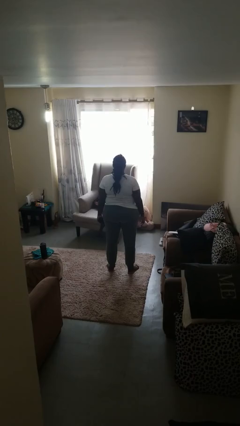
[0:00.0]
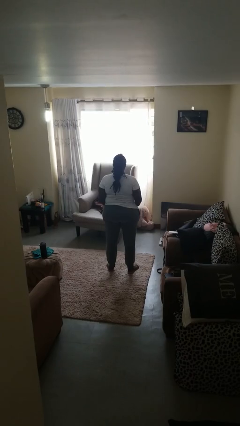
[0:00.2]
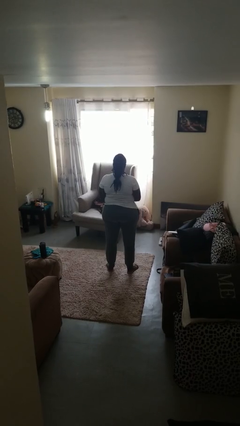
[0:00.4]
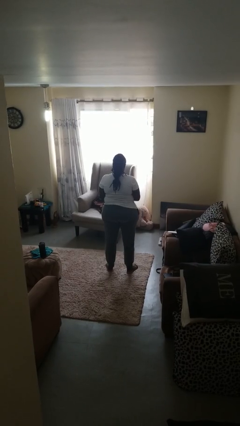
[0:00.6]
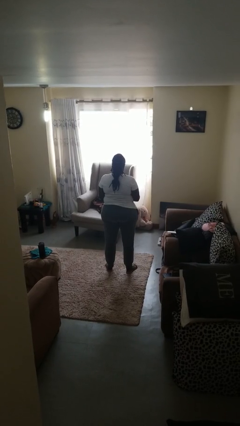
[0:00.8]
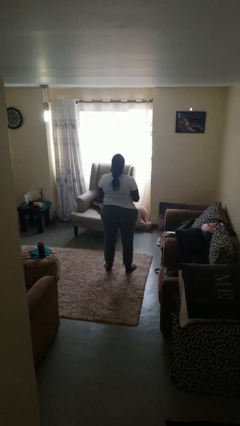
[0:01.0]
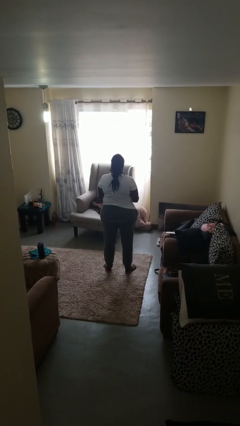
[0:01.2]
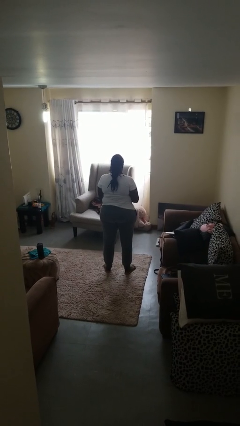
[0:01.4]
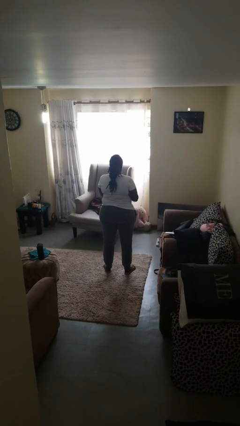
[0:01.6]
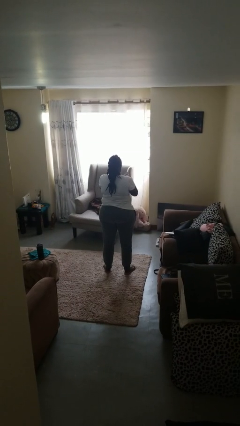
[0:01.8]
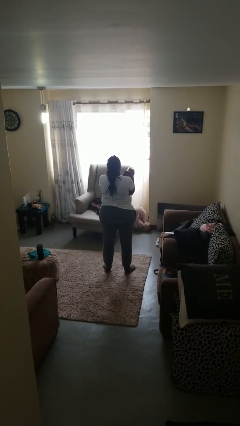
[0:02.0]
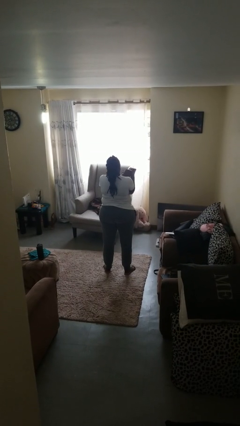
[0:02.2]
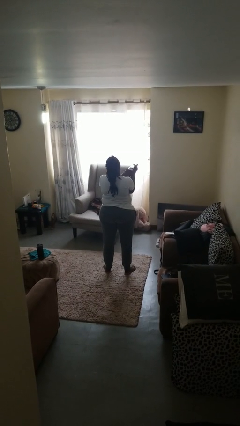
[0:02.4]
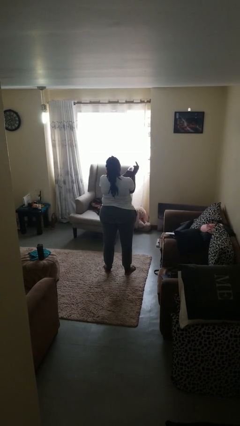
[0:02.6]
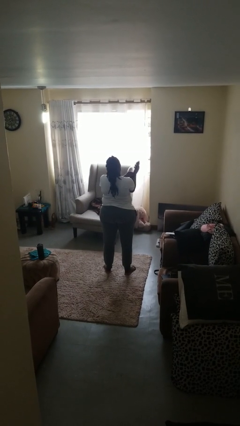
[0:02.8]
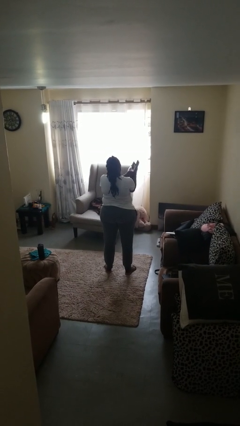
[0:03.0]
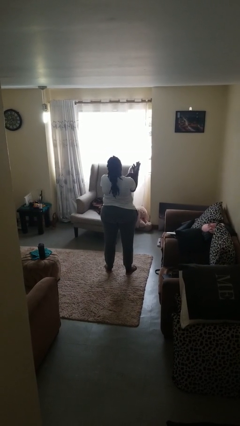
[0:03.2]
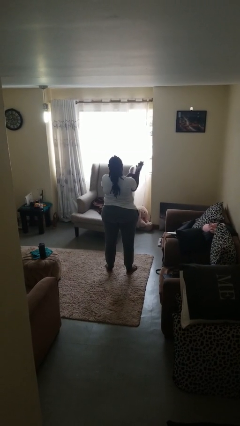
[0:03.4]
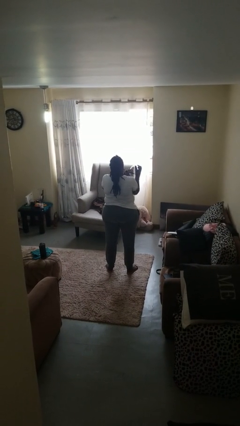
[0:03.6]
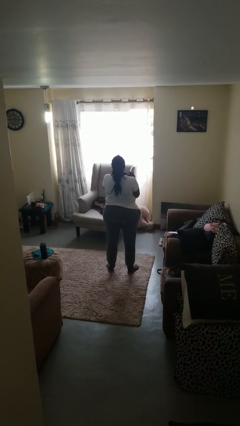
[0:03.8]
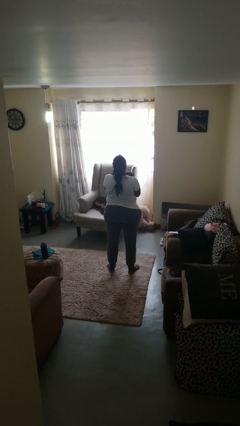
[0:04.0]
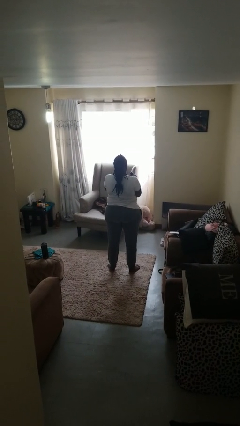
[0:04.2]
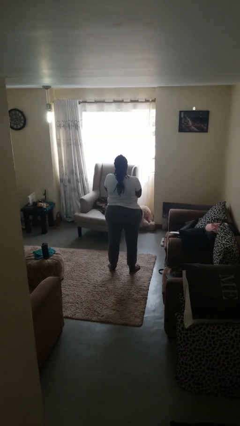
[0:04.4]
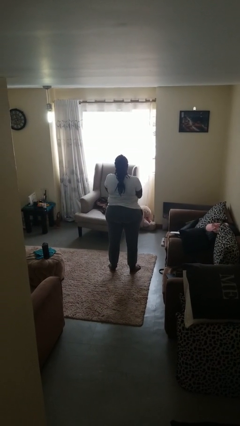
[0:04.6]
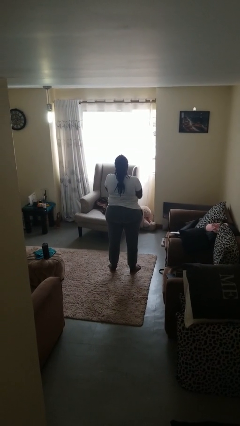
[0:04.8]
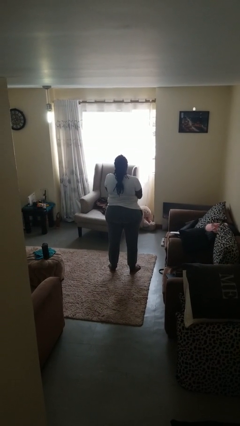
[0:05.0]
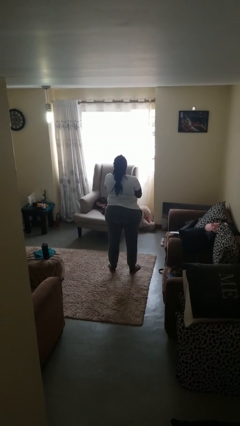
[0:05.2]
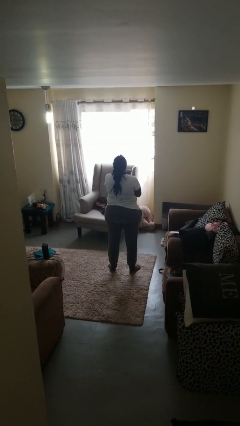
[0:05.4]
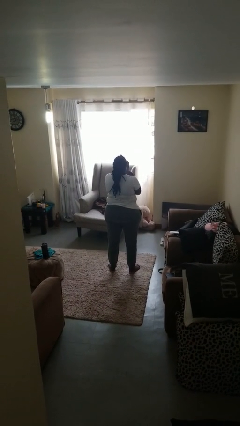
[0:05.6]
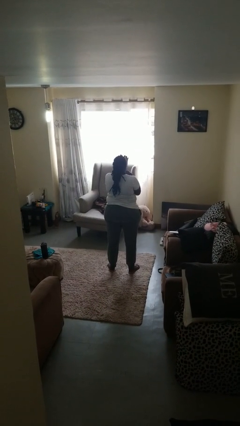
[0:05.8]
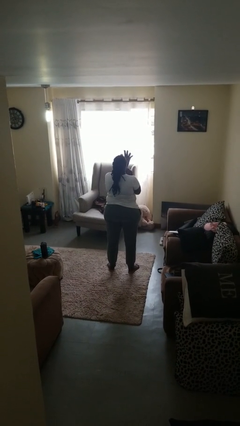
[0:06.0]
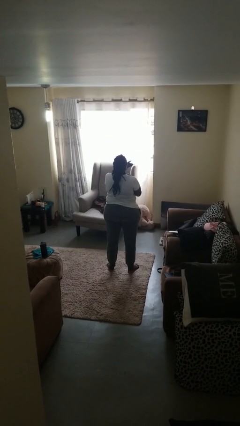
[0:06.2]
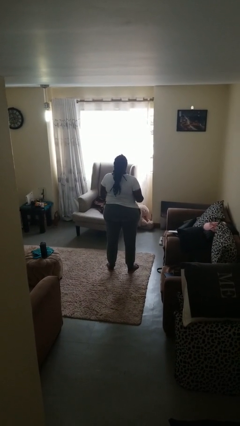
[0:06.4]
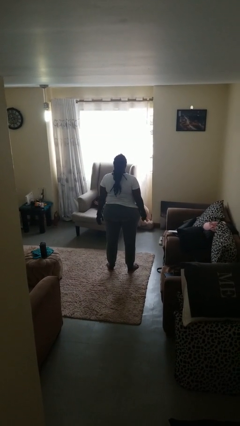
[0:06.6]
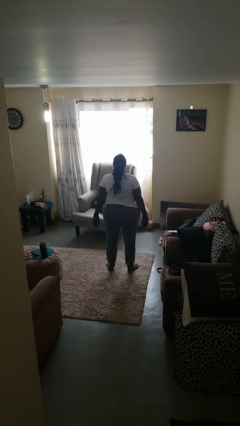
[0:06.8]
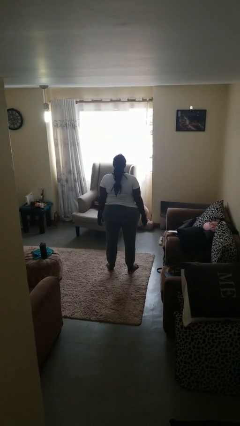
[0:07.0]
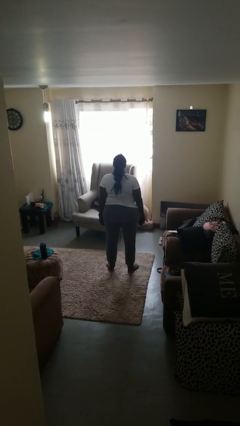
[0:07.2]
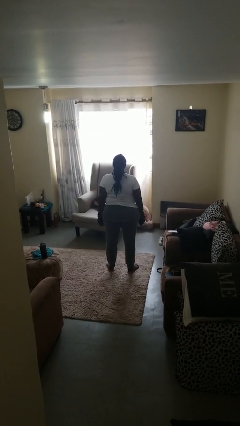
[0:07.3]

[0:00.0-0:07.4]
person puts on gloves

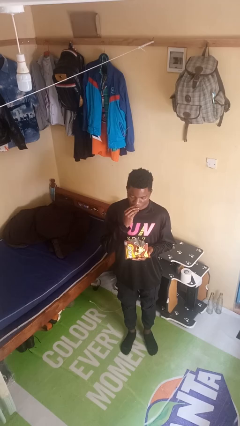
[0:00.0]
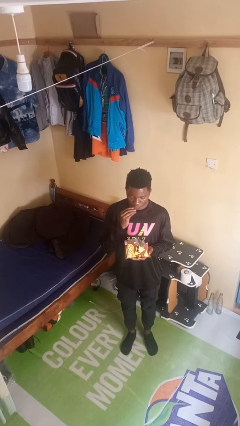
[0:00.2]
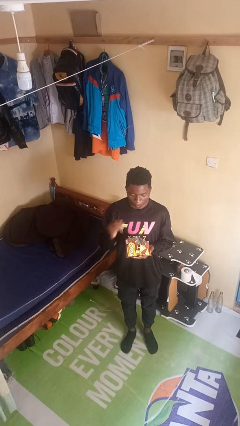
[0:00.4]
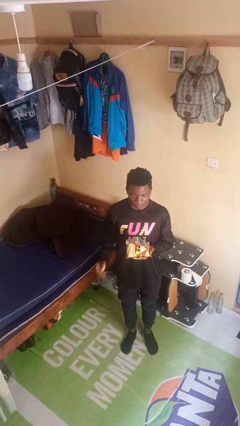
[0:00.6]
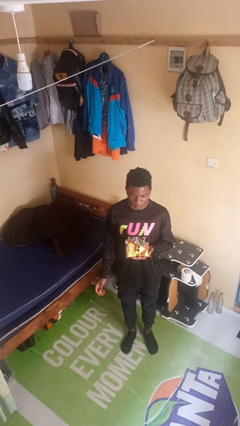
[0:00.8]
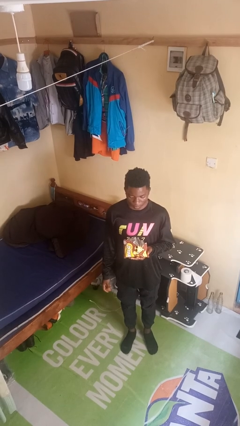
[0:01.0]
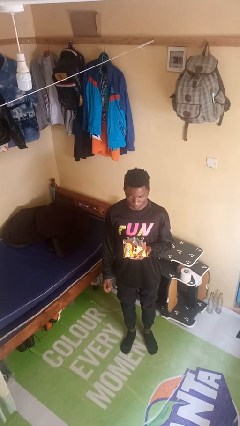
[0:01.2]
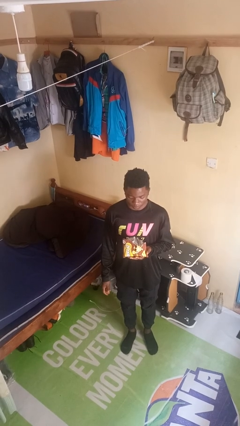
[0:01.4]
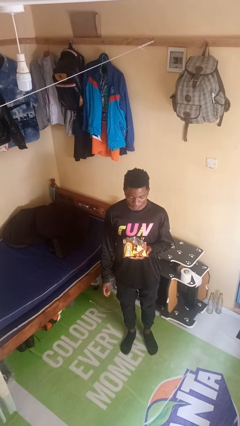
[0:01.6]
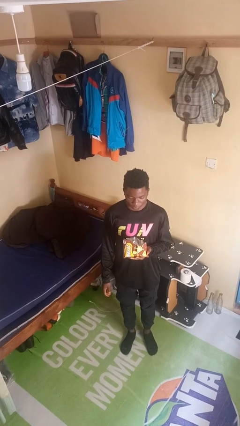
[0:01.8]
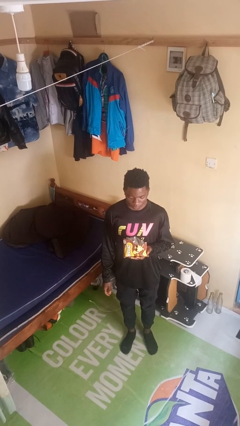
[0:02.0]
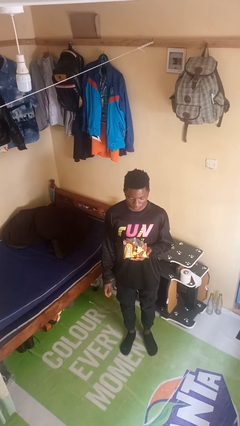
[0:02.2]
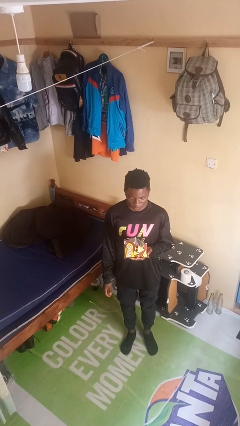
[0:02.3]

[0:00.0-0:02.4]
person eats snack from bag

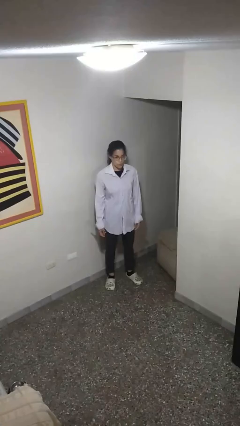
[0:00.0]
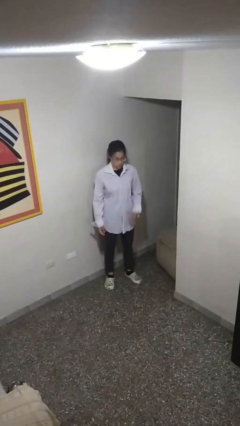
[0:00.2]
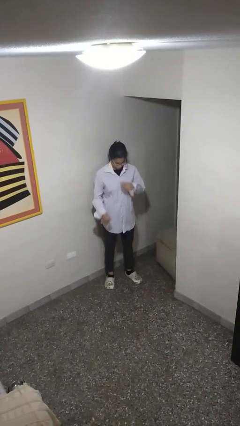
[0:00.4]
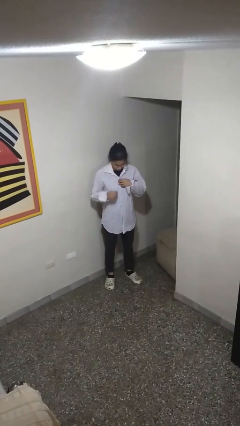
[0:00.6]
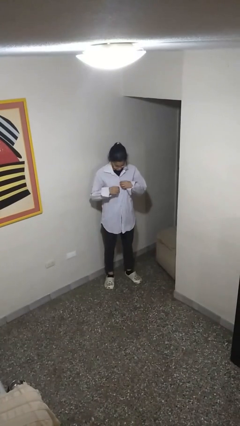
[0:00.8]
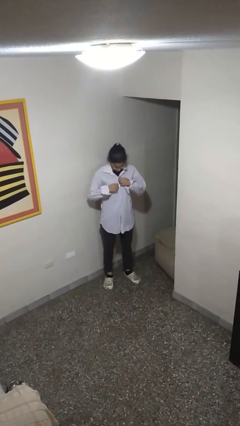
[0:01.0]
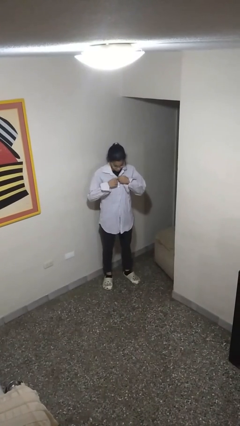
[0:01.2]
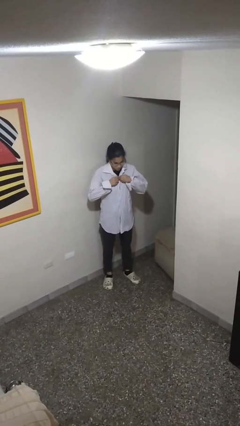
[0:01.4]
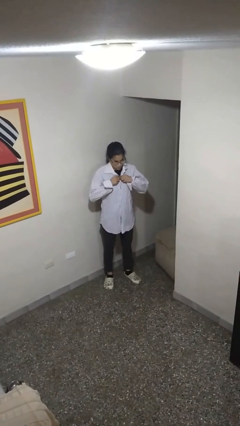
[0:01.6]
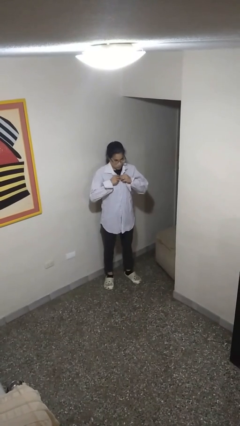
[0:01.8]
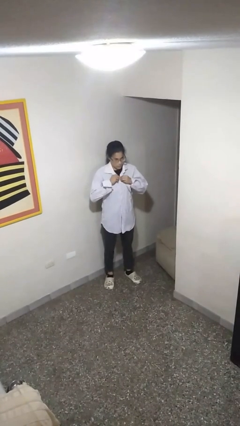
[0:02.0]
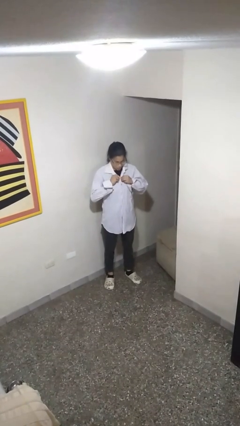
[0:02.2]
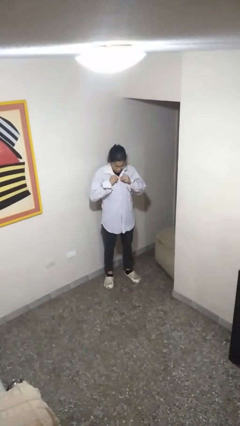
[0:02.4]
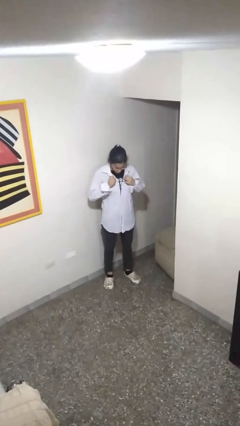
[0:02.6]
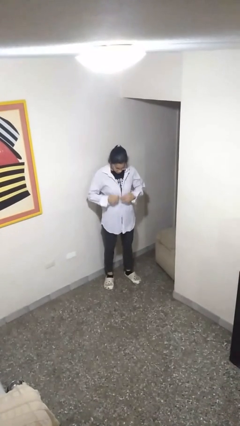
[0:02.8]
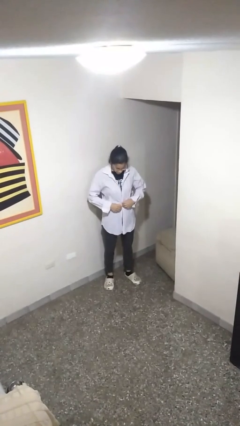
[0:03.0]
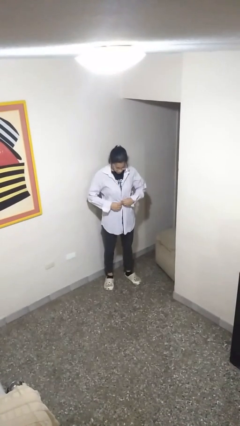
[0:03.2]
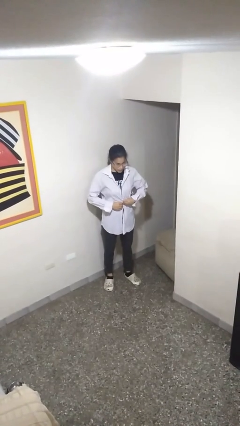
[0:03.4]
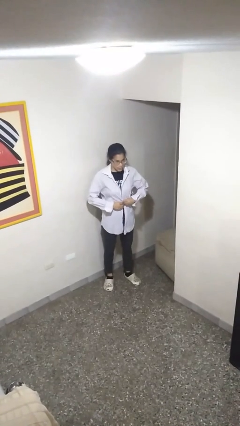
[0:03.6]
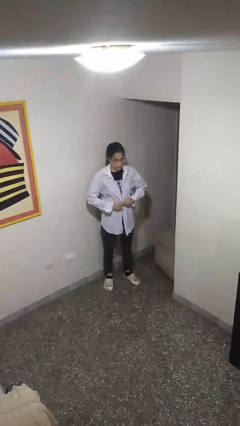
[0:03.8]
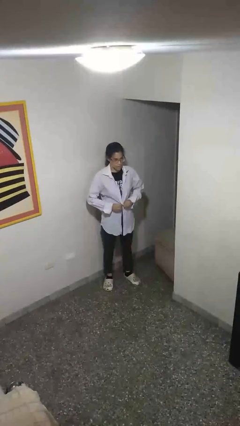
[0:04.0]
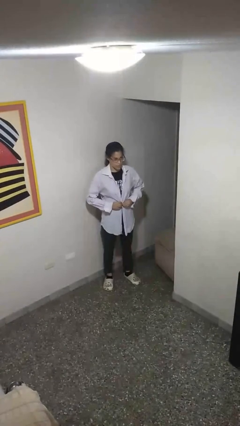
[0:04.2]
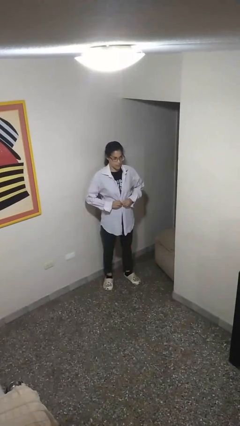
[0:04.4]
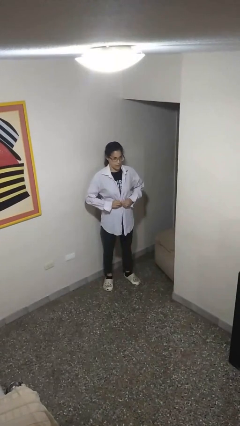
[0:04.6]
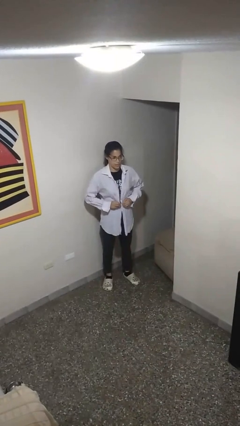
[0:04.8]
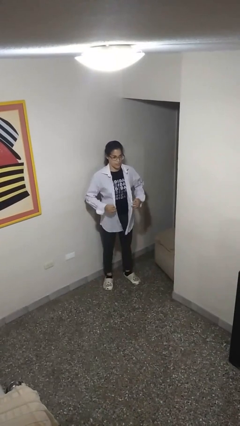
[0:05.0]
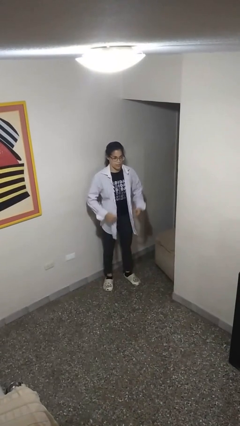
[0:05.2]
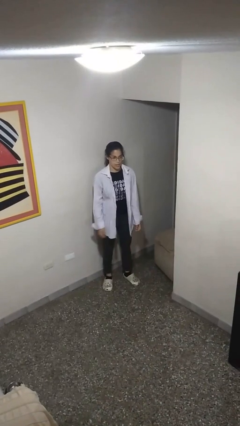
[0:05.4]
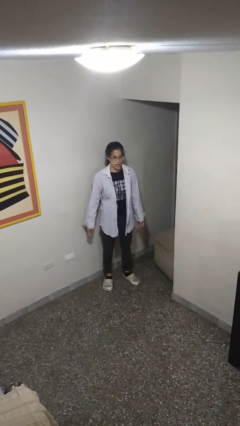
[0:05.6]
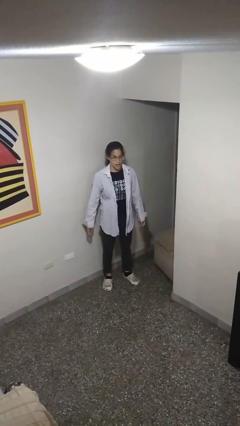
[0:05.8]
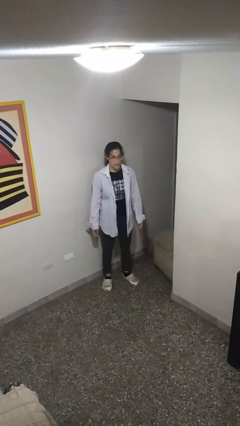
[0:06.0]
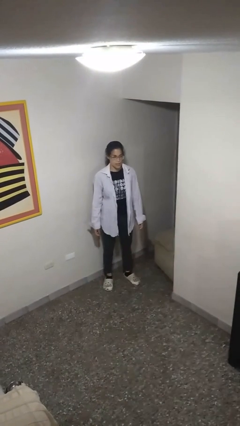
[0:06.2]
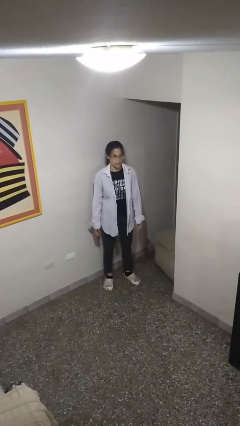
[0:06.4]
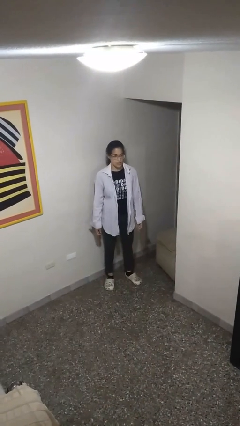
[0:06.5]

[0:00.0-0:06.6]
person unbuttons shirt

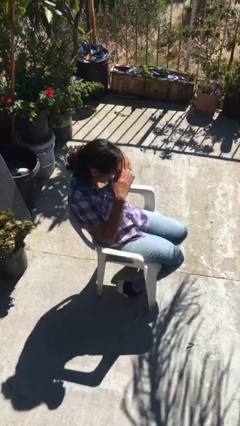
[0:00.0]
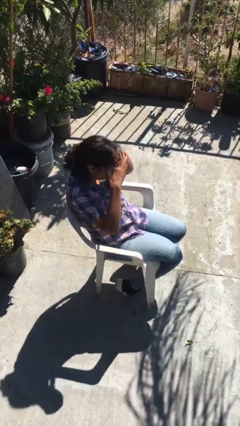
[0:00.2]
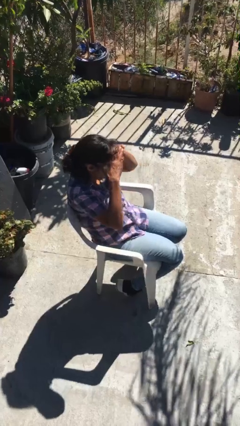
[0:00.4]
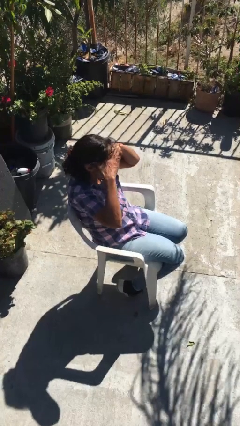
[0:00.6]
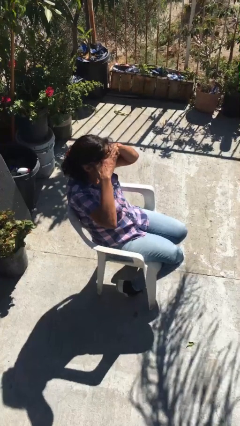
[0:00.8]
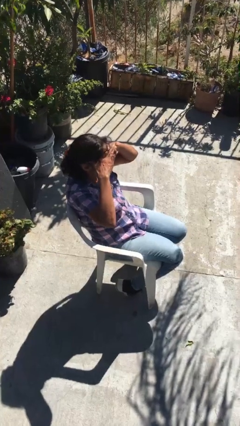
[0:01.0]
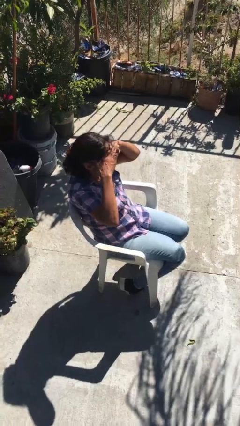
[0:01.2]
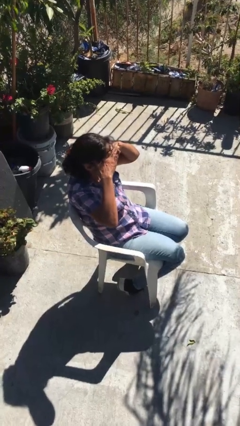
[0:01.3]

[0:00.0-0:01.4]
person shades eyes

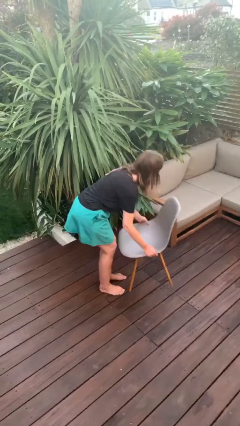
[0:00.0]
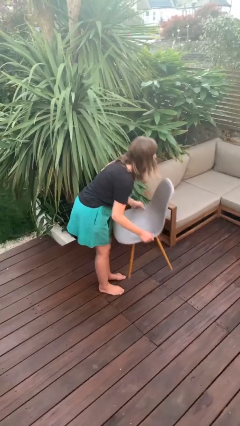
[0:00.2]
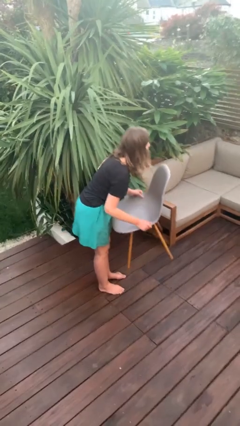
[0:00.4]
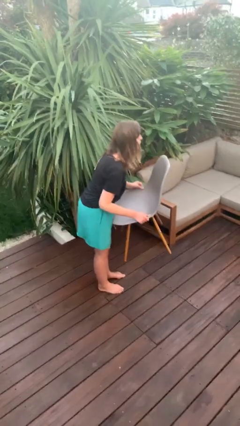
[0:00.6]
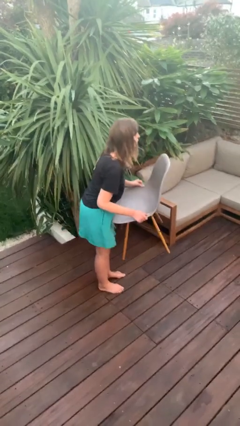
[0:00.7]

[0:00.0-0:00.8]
person picks up object from floor
